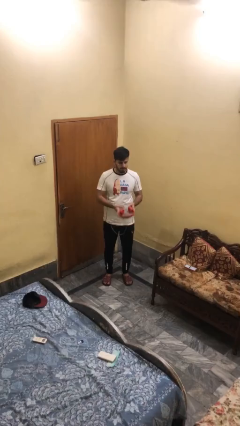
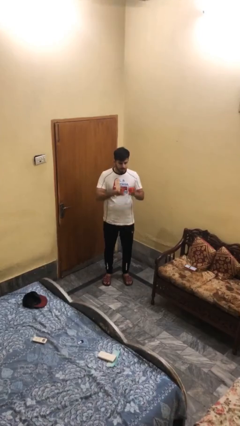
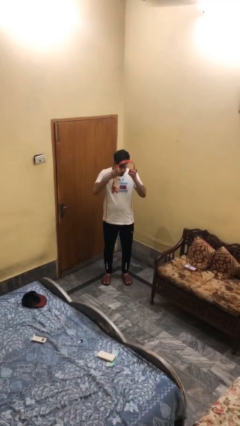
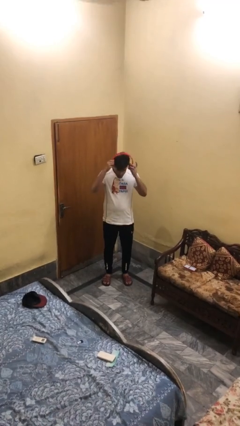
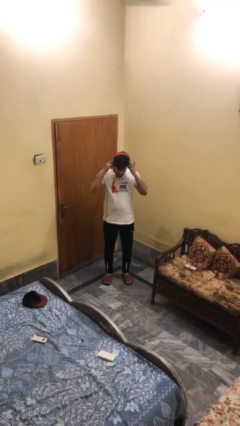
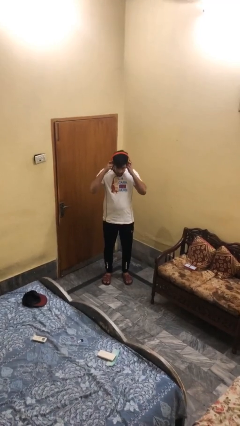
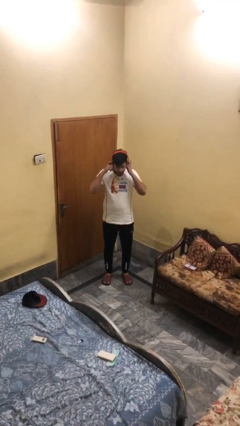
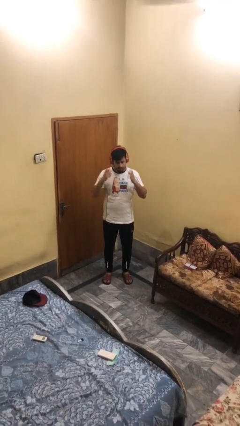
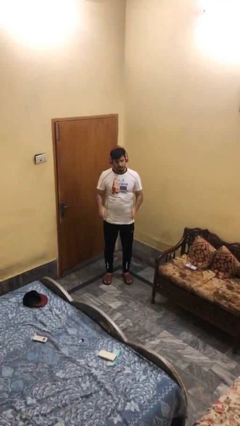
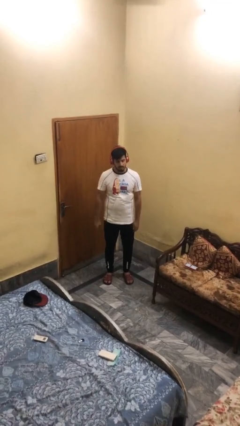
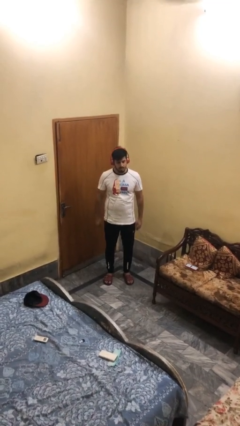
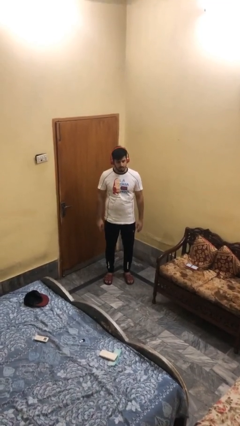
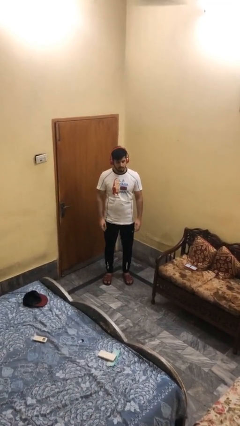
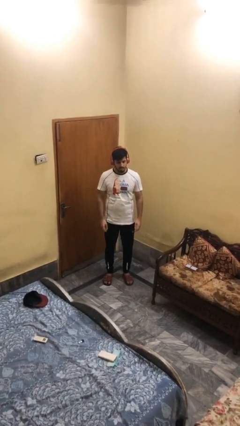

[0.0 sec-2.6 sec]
person puts on headphones

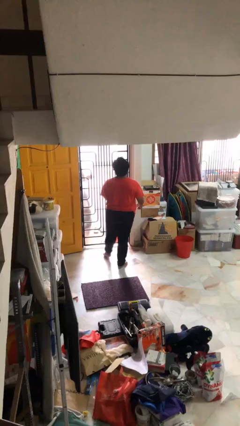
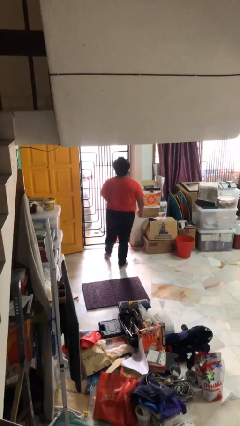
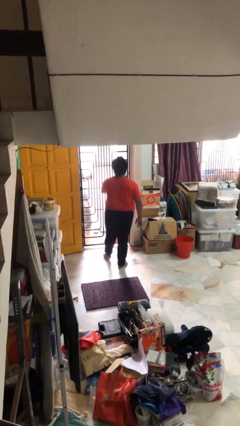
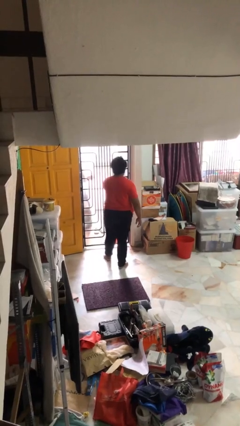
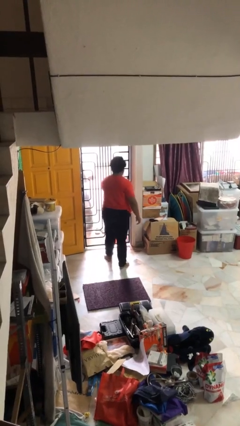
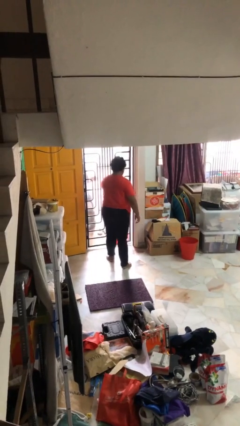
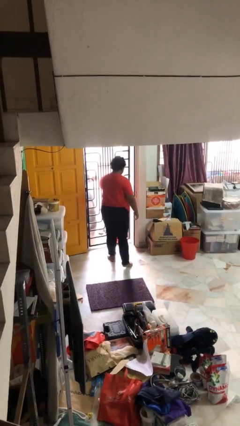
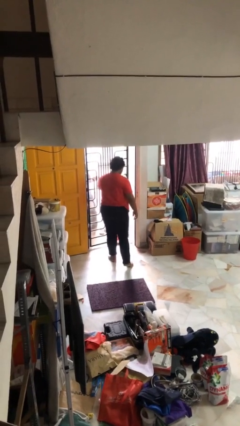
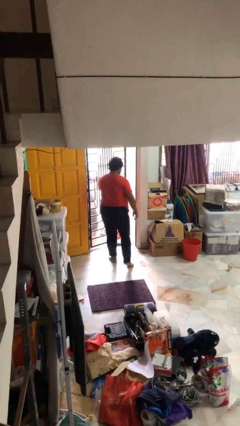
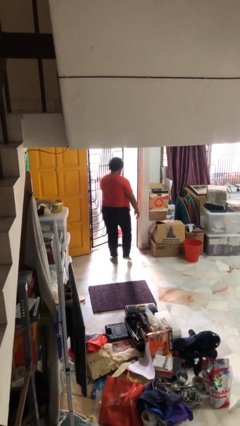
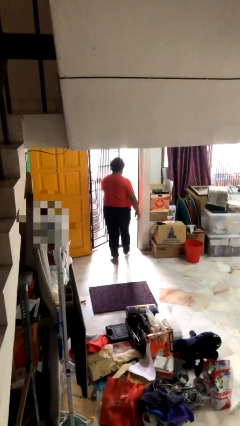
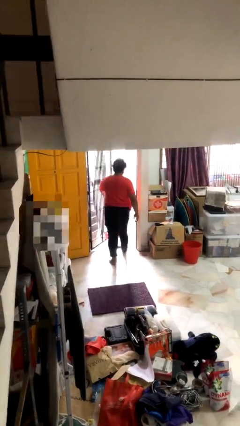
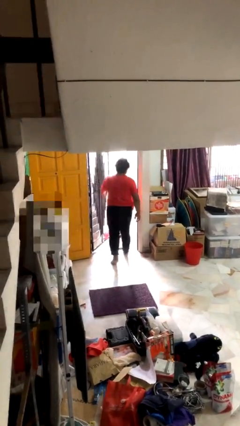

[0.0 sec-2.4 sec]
person opens facility door

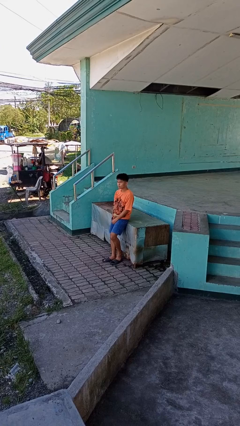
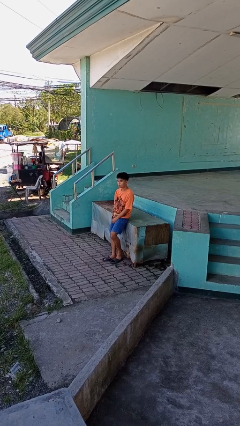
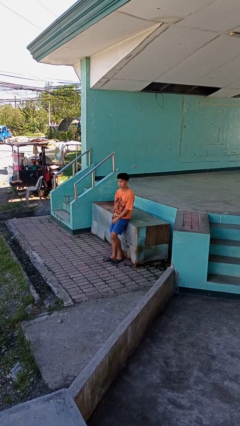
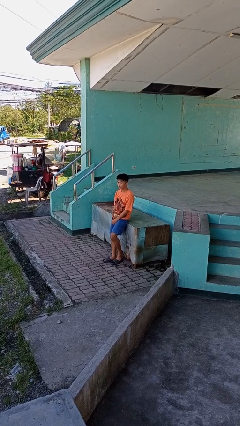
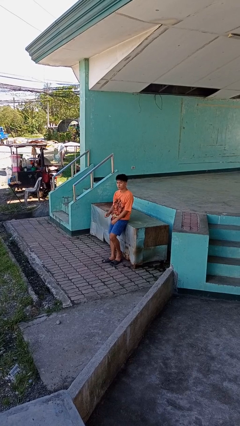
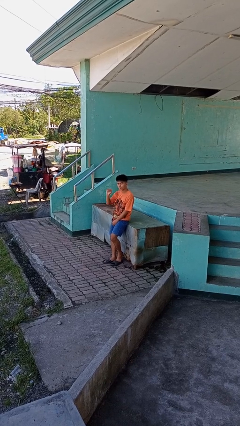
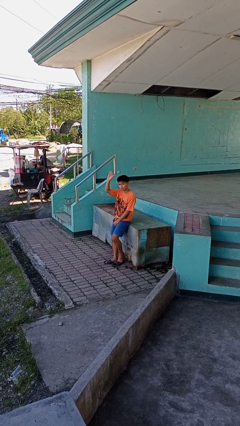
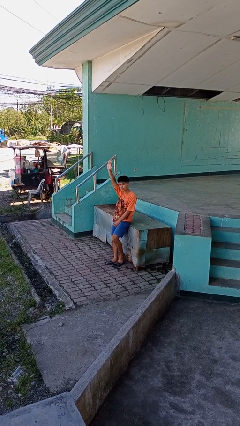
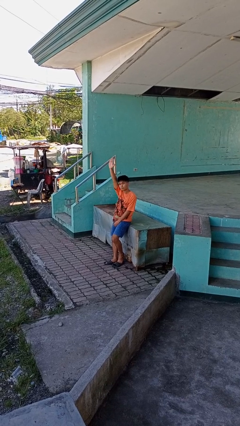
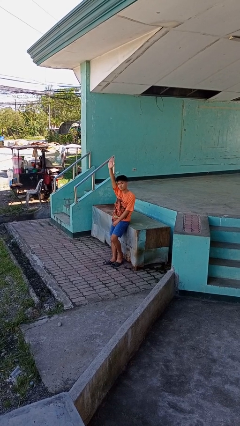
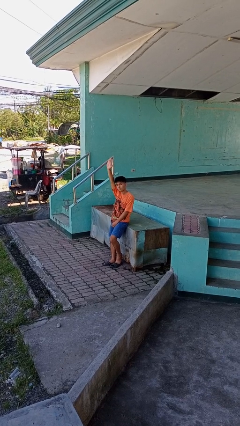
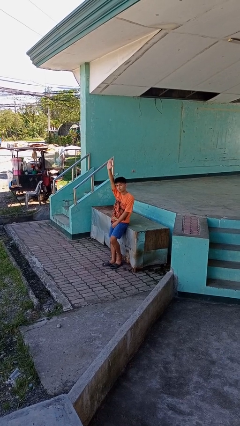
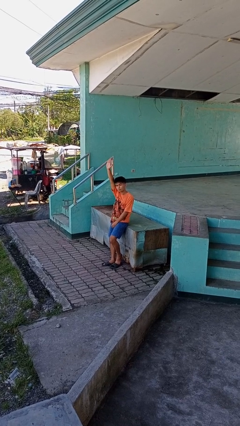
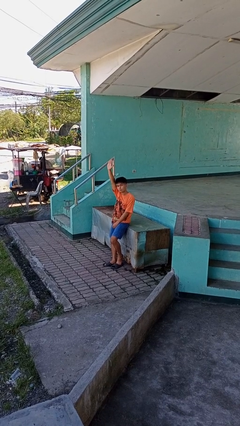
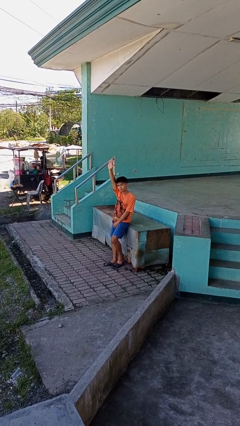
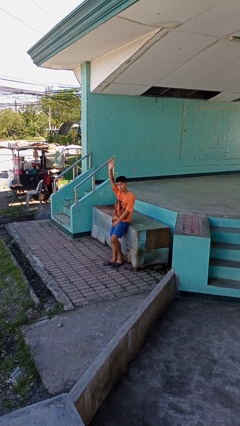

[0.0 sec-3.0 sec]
person gestures raise hand

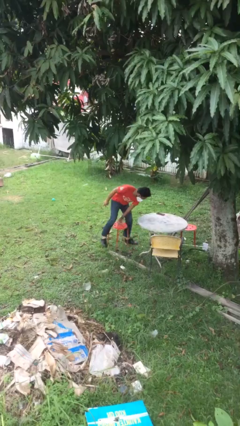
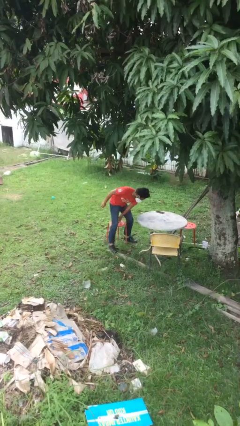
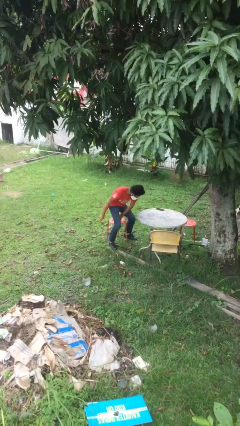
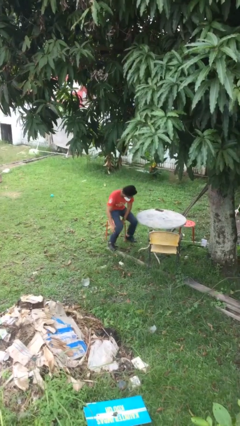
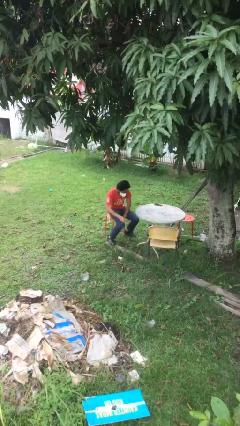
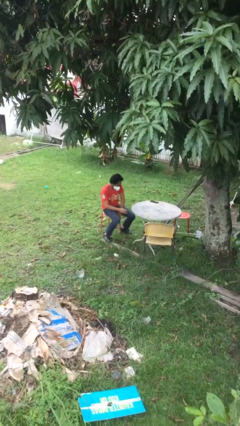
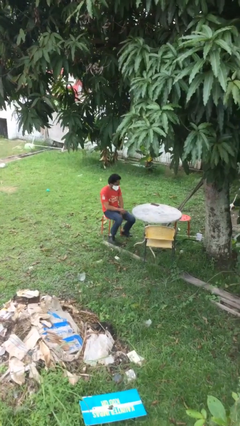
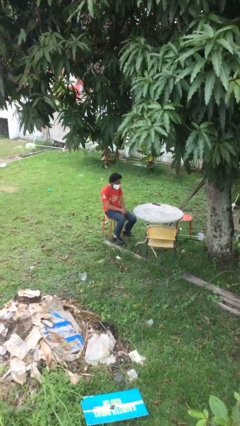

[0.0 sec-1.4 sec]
person sits down

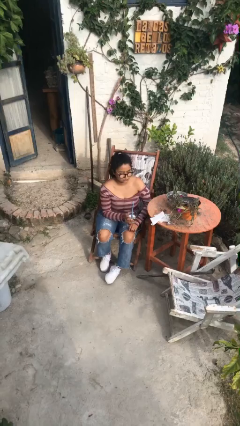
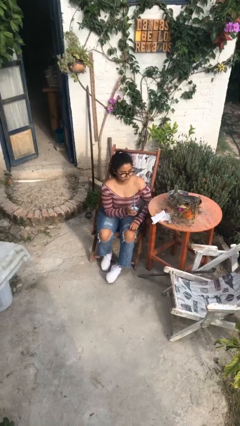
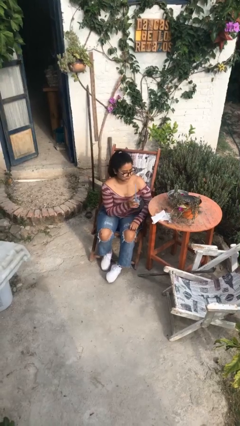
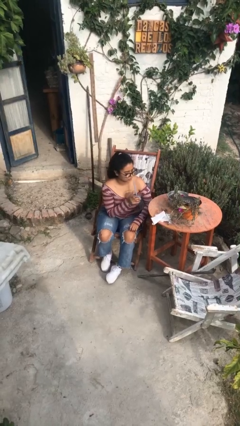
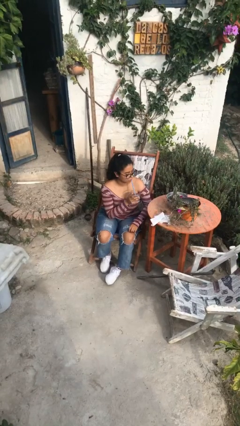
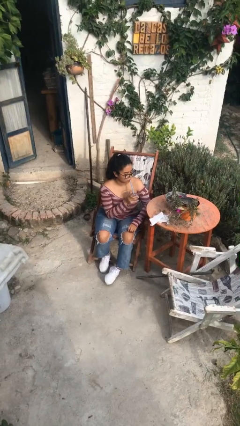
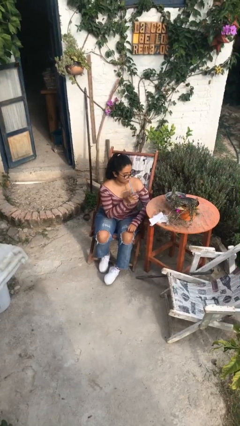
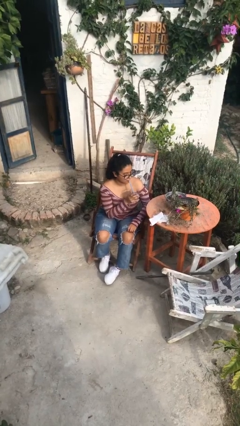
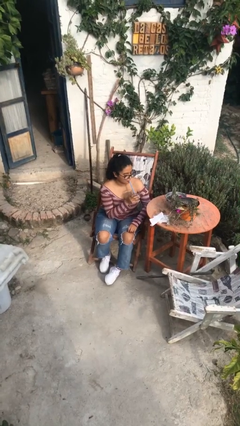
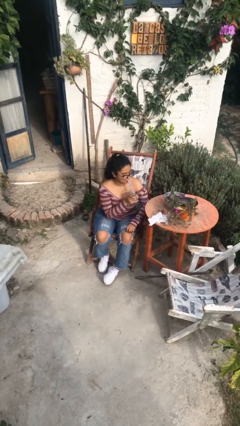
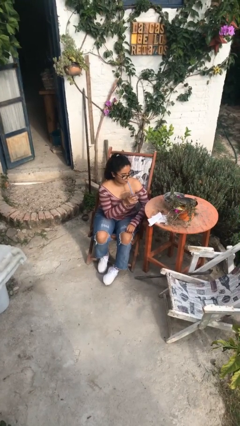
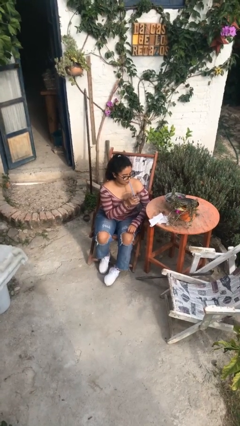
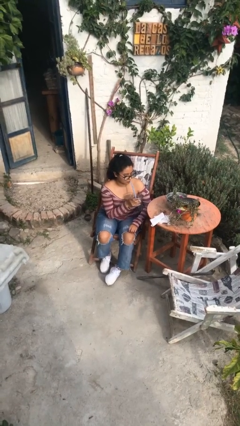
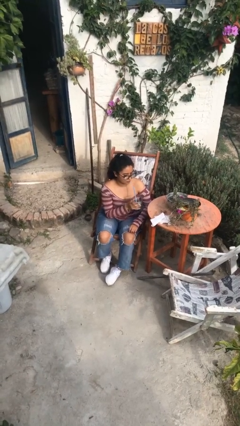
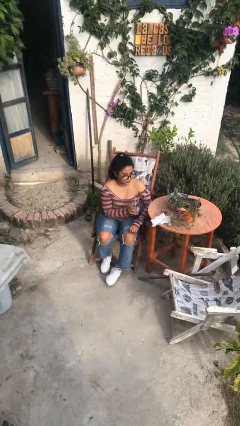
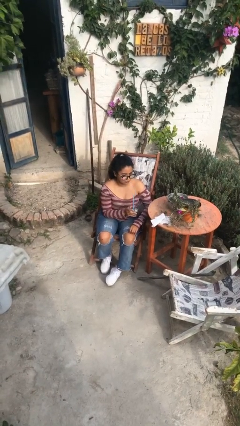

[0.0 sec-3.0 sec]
person drinks from straw

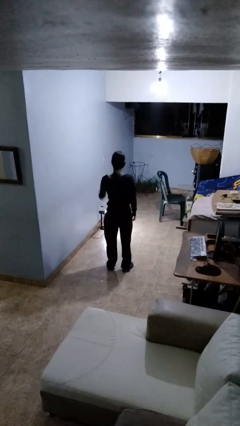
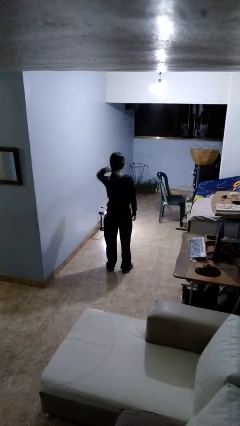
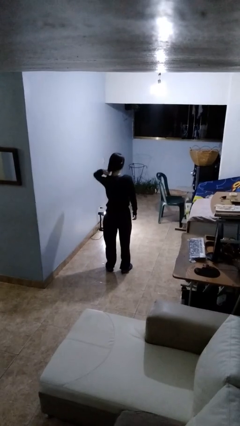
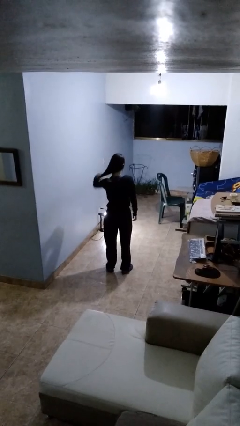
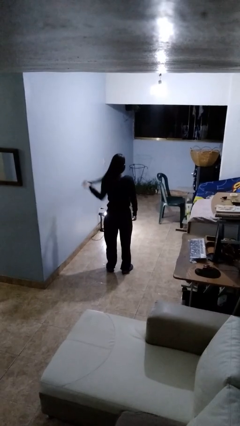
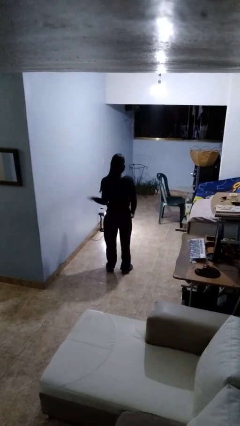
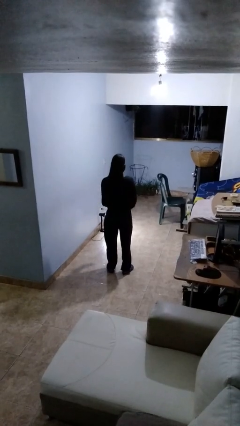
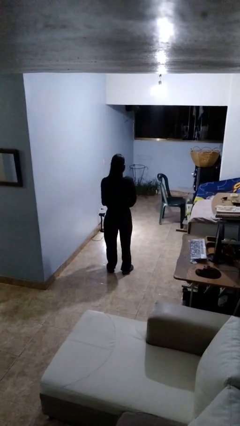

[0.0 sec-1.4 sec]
person takes off hairtie

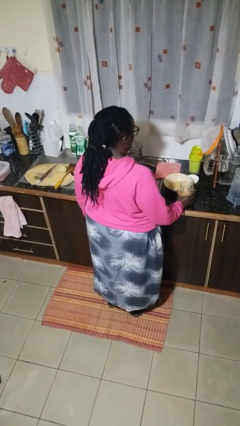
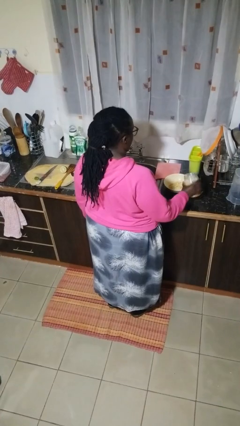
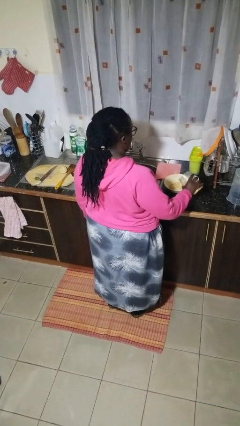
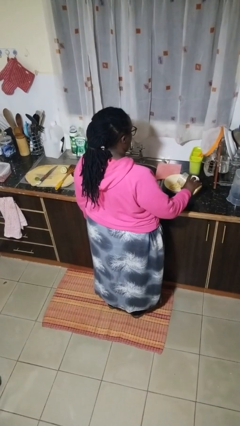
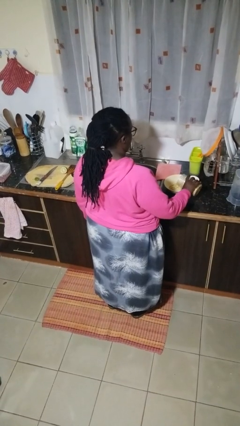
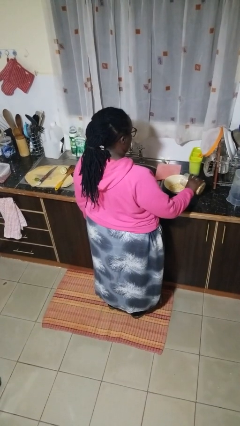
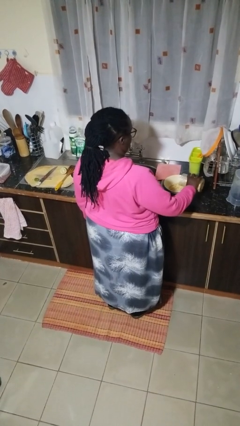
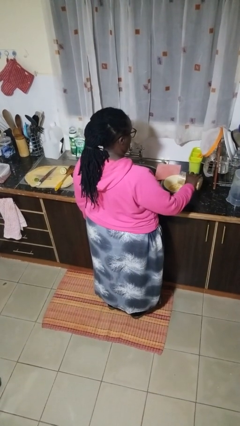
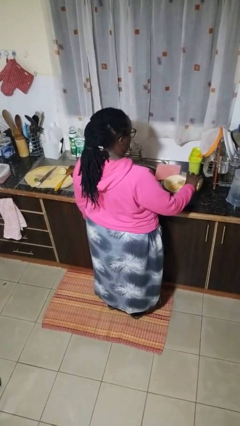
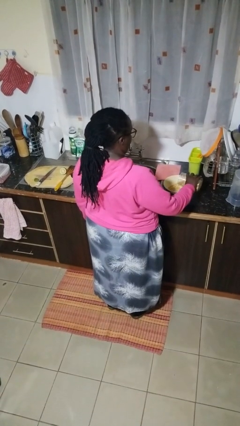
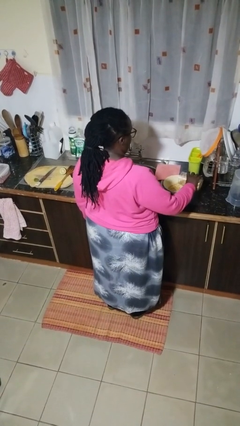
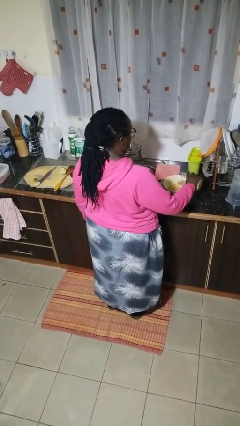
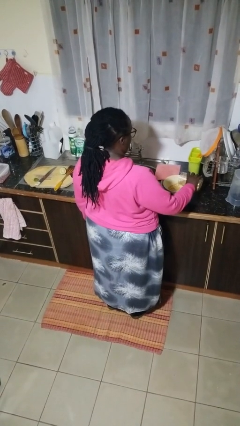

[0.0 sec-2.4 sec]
person pours into bowl

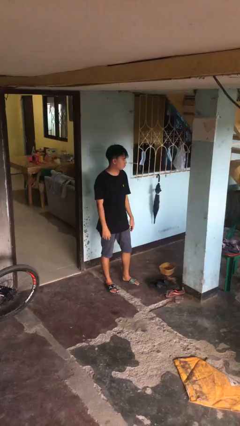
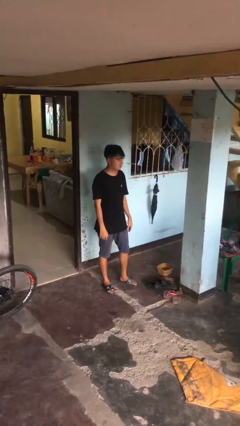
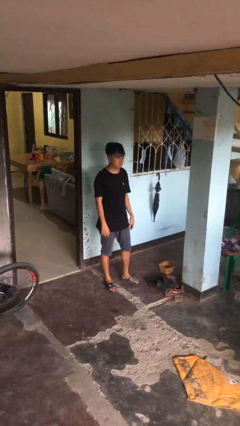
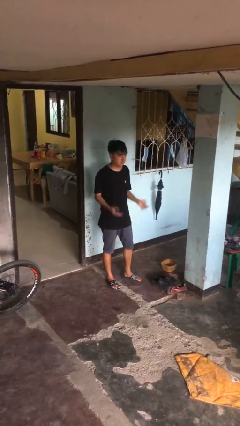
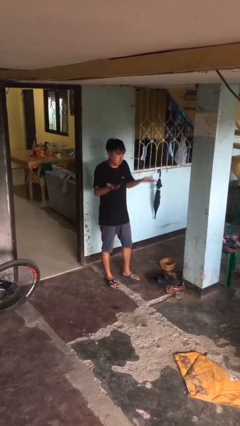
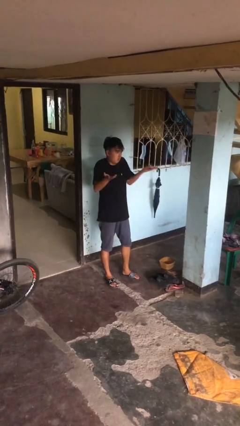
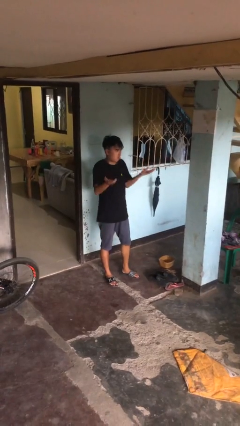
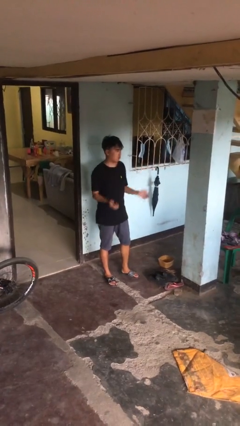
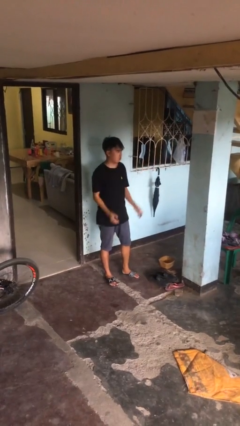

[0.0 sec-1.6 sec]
person shrugs
